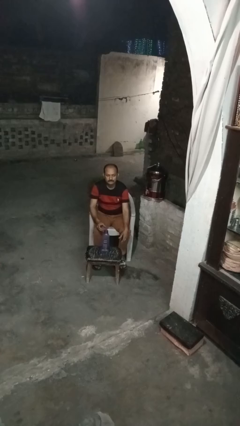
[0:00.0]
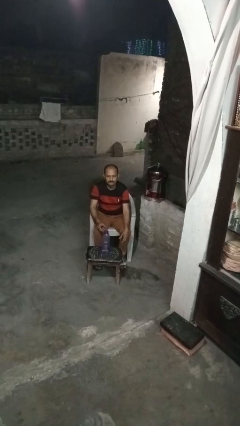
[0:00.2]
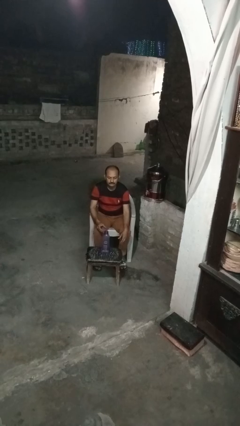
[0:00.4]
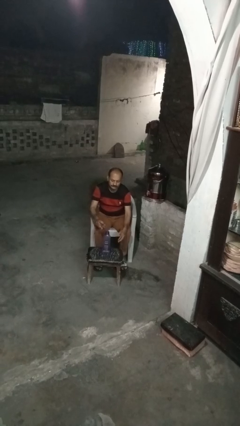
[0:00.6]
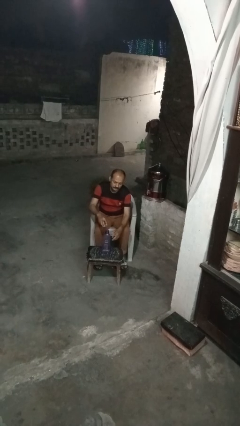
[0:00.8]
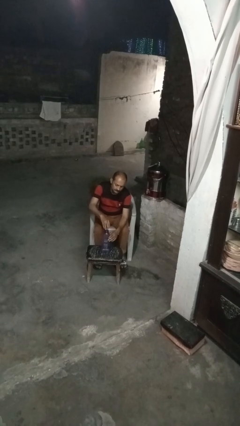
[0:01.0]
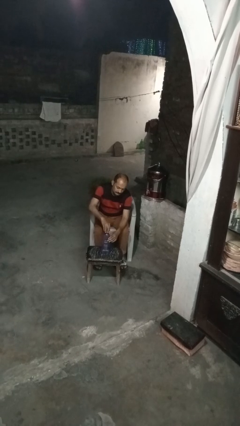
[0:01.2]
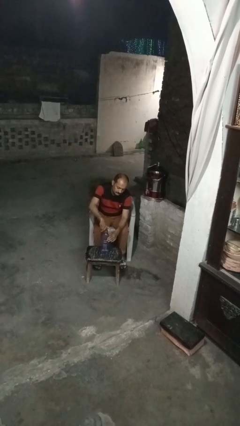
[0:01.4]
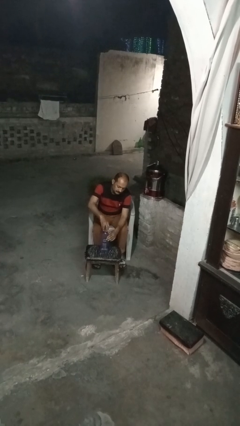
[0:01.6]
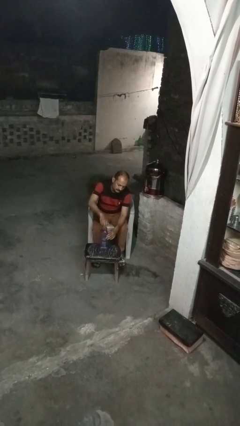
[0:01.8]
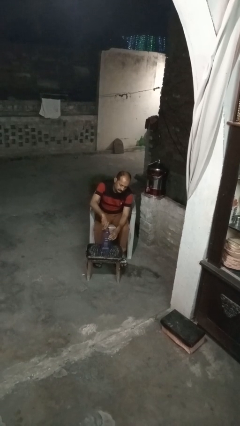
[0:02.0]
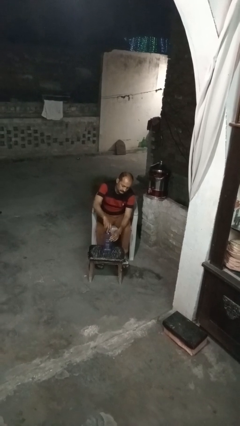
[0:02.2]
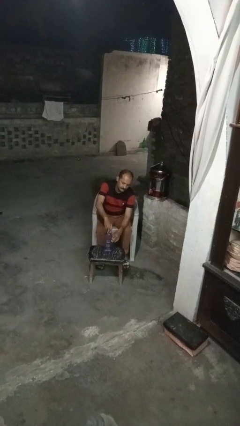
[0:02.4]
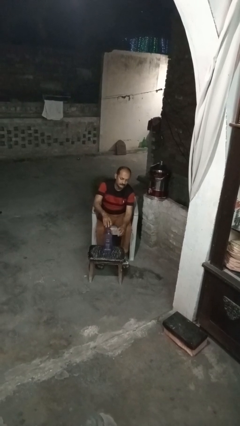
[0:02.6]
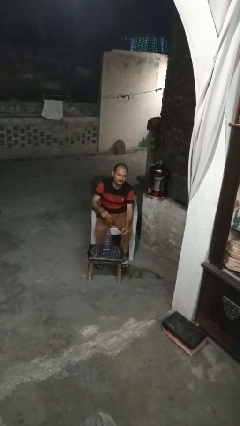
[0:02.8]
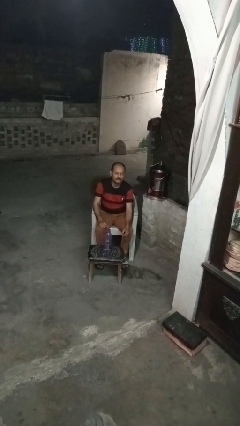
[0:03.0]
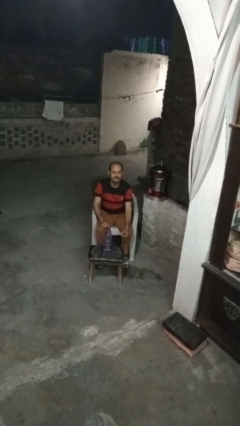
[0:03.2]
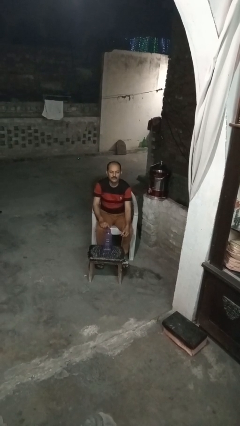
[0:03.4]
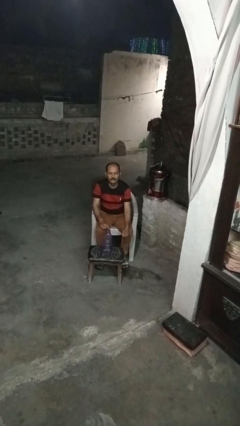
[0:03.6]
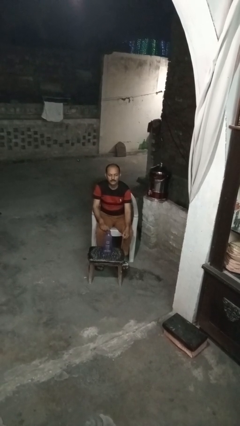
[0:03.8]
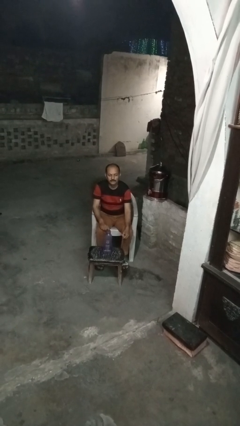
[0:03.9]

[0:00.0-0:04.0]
person screws lid to bottle

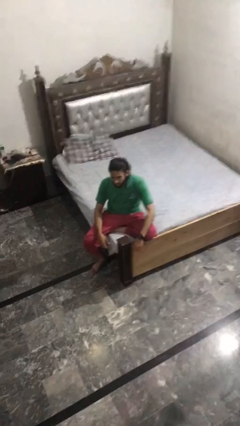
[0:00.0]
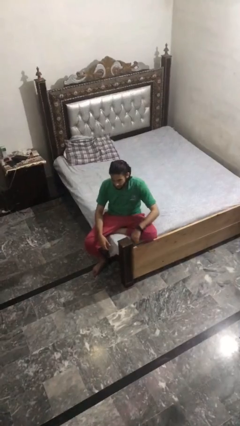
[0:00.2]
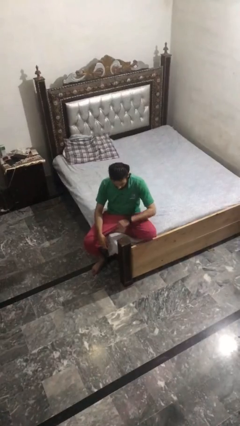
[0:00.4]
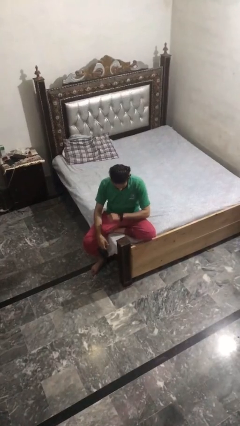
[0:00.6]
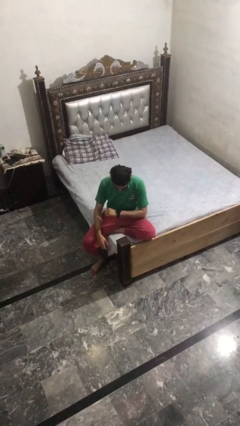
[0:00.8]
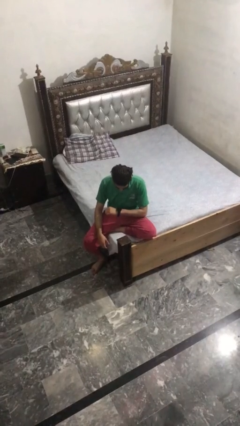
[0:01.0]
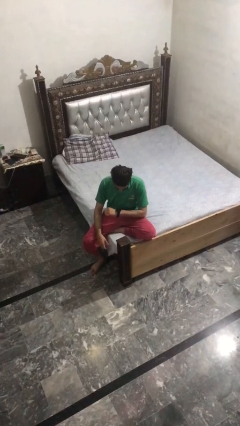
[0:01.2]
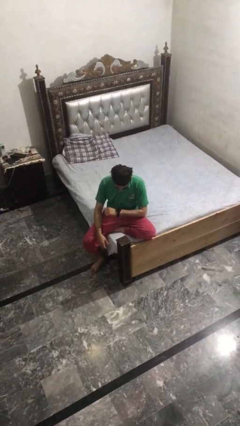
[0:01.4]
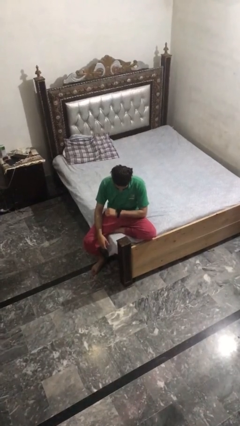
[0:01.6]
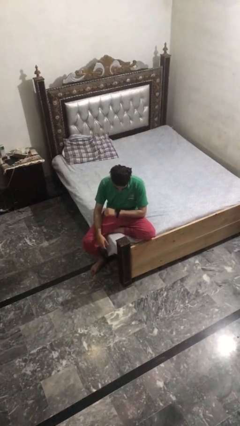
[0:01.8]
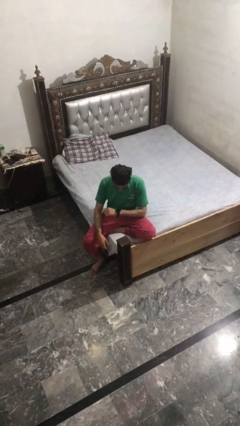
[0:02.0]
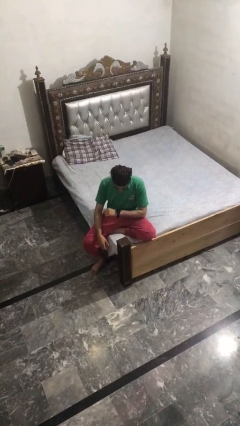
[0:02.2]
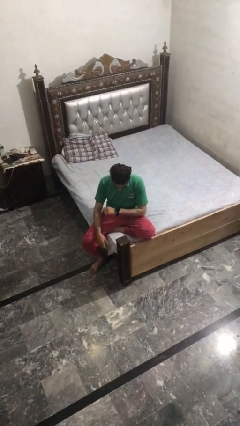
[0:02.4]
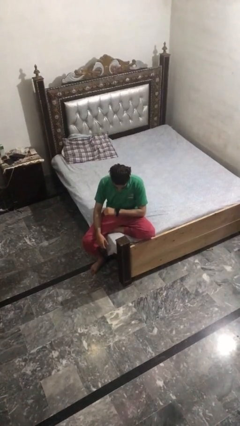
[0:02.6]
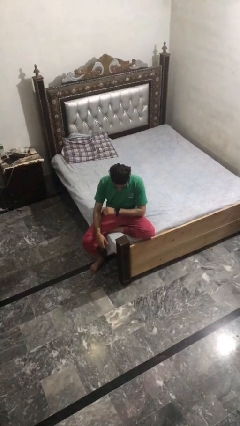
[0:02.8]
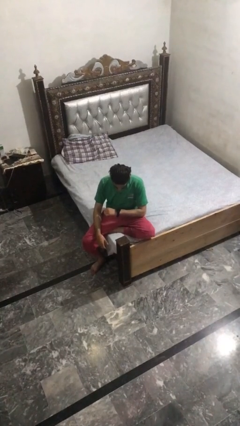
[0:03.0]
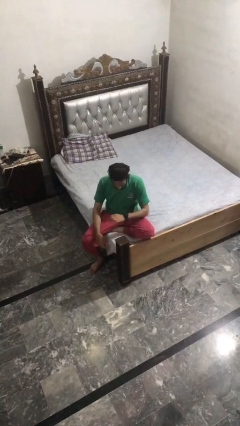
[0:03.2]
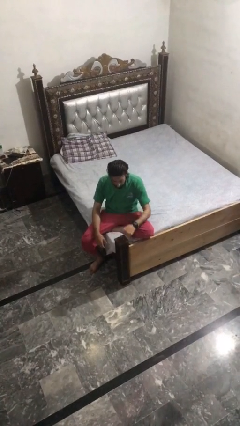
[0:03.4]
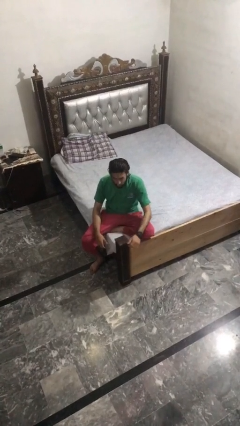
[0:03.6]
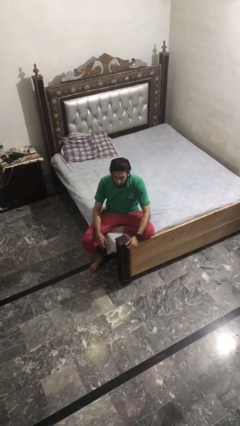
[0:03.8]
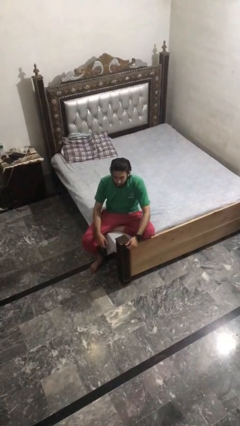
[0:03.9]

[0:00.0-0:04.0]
person looks at wristwatch

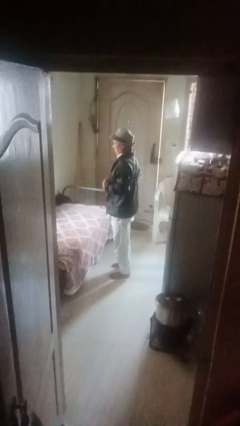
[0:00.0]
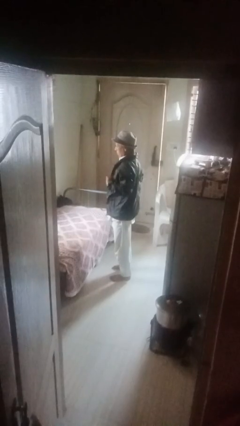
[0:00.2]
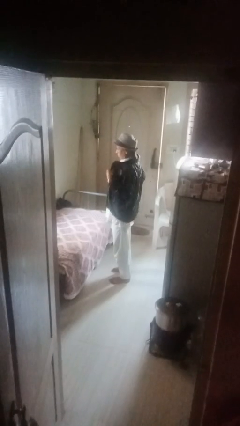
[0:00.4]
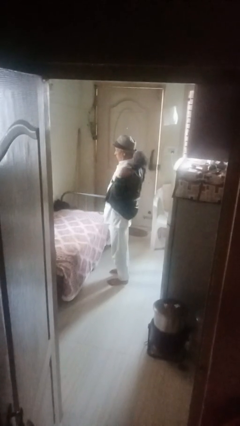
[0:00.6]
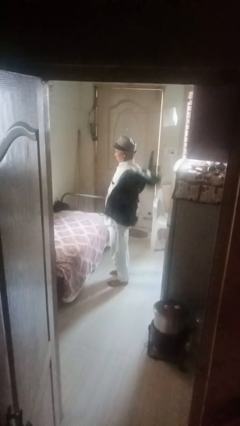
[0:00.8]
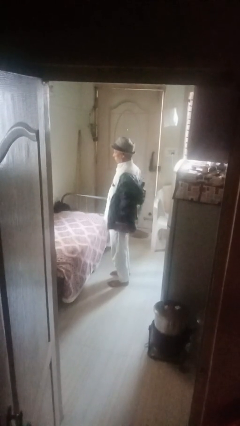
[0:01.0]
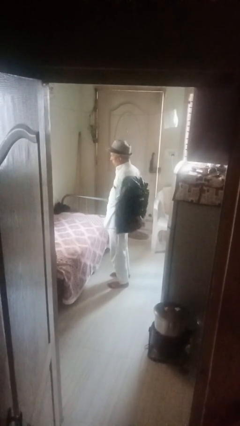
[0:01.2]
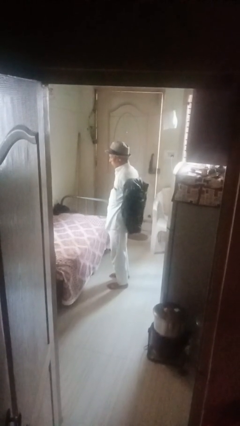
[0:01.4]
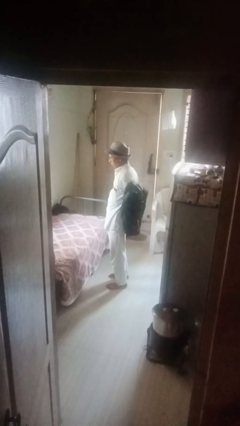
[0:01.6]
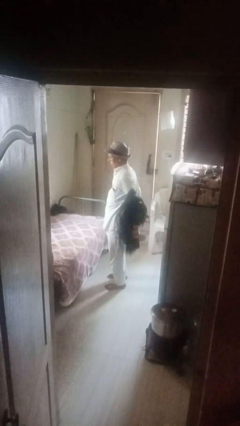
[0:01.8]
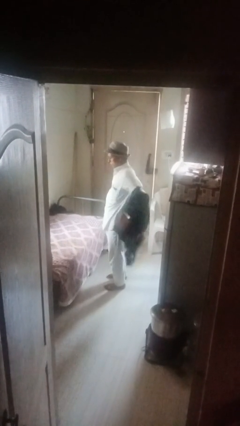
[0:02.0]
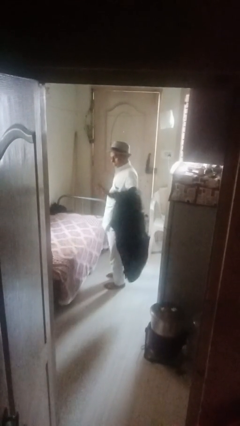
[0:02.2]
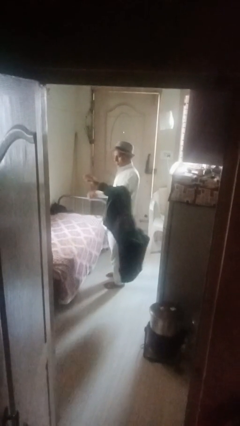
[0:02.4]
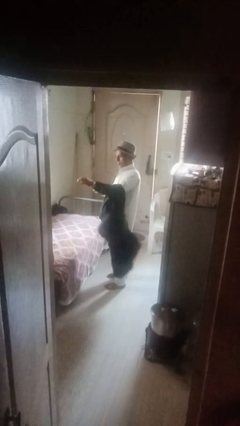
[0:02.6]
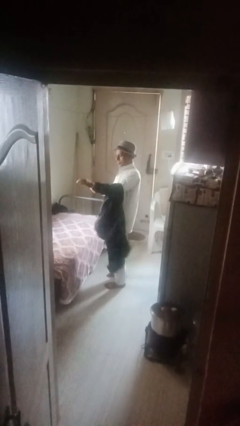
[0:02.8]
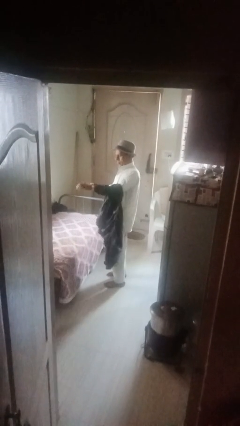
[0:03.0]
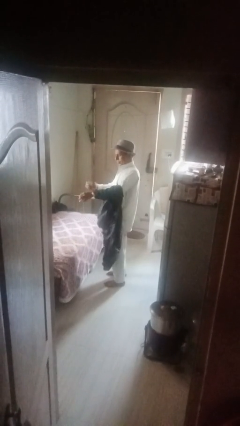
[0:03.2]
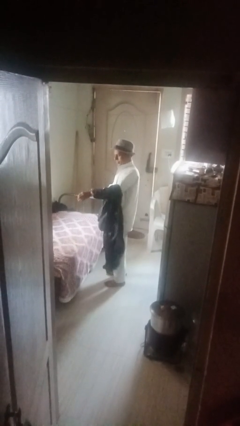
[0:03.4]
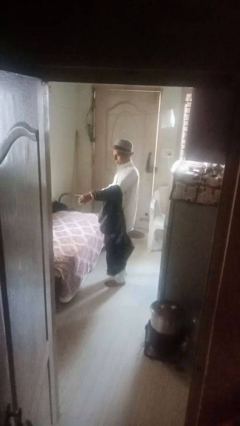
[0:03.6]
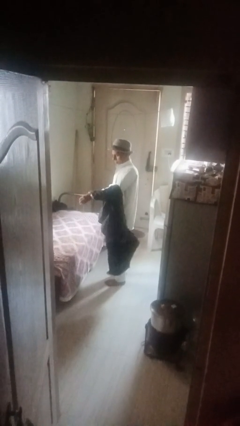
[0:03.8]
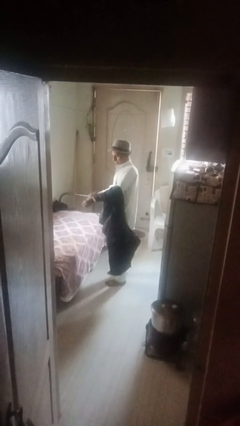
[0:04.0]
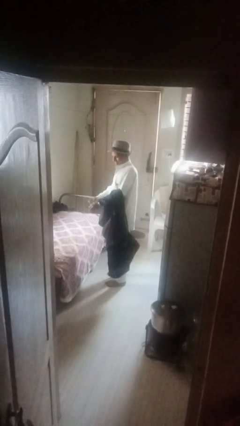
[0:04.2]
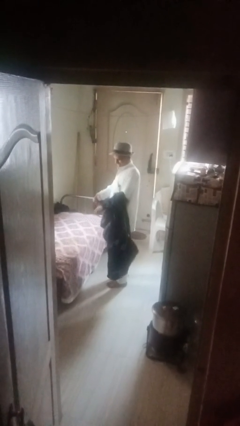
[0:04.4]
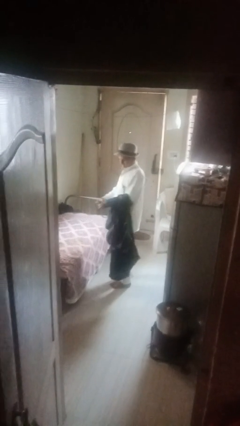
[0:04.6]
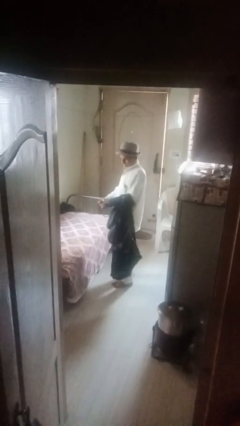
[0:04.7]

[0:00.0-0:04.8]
person takes off jacket

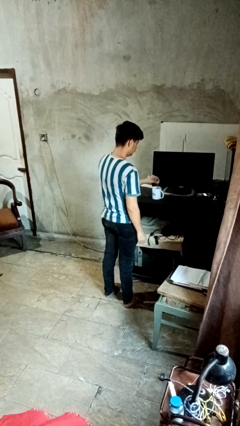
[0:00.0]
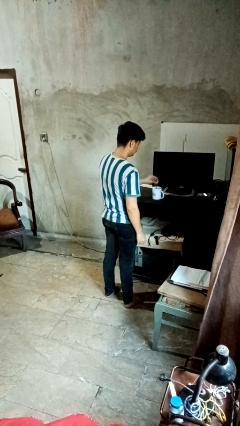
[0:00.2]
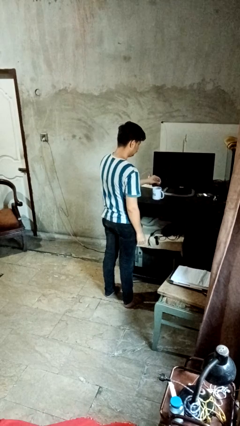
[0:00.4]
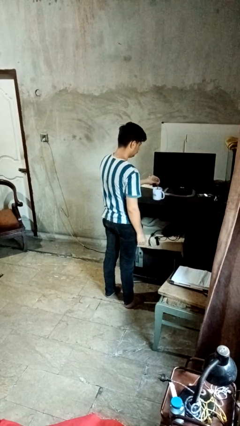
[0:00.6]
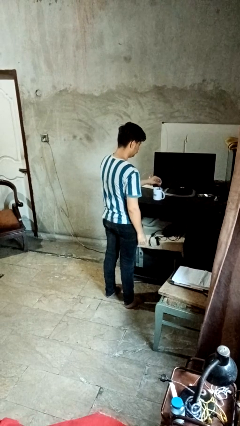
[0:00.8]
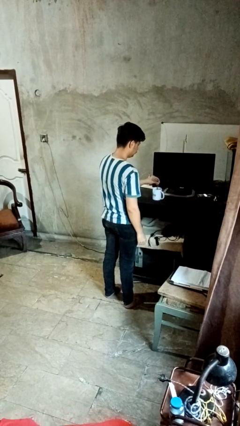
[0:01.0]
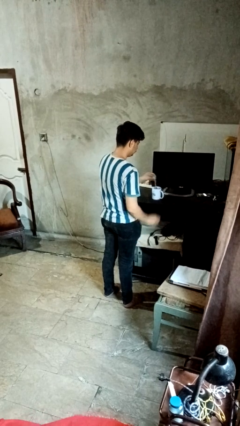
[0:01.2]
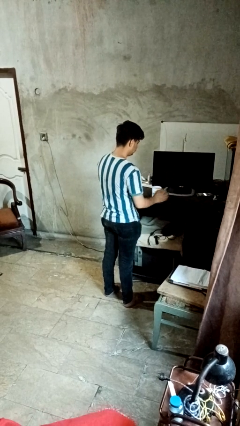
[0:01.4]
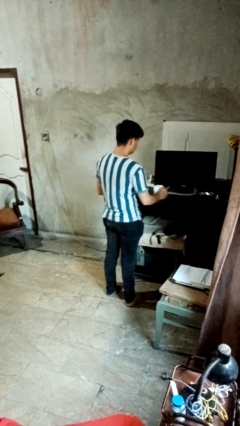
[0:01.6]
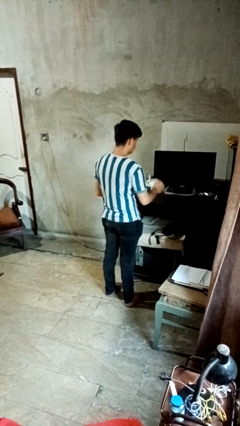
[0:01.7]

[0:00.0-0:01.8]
person stirs mug

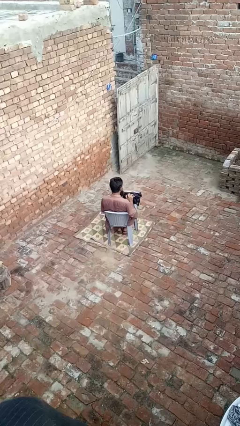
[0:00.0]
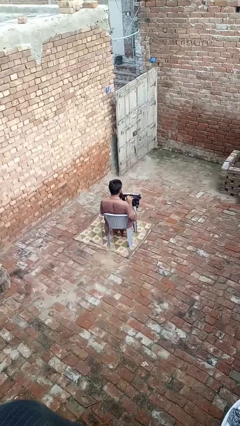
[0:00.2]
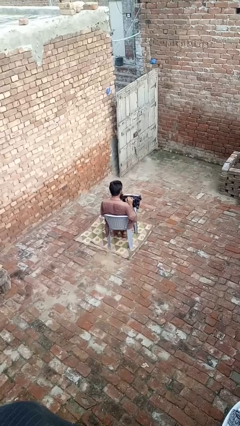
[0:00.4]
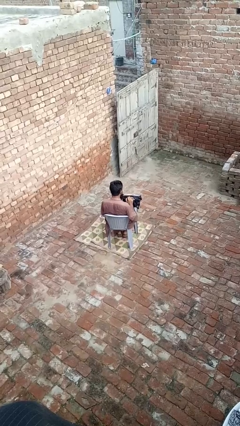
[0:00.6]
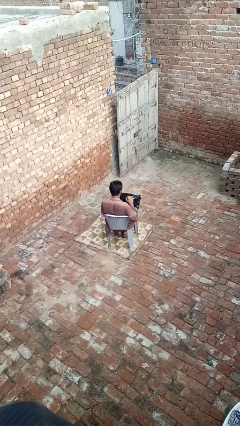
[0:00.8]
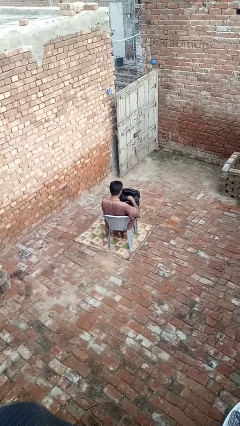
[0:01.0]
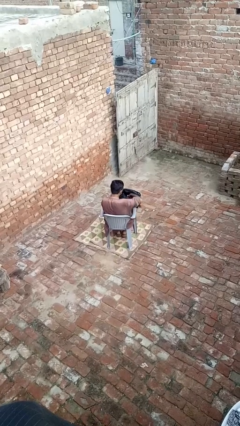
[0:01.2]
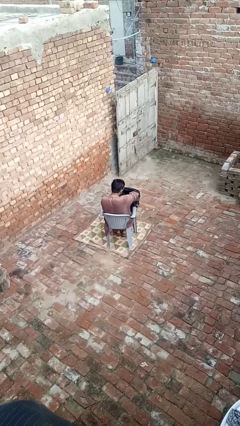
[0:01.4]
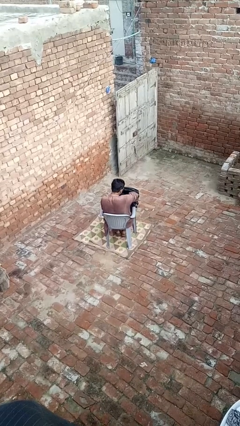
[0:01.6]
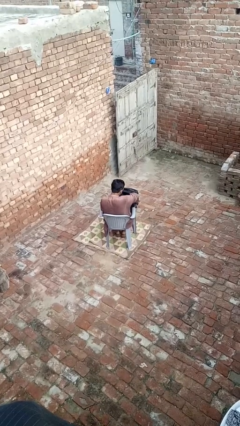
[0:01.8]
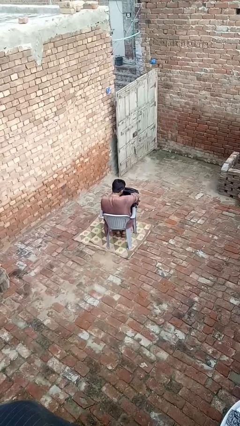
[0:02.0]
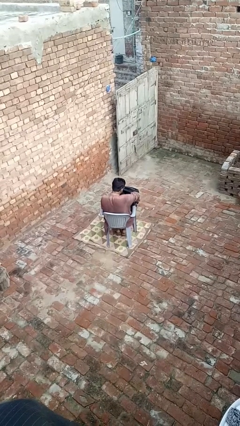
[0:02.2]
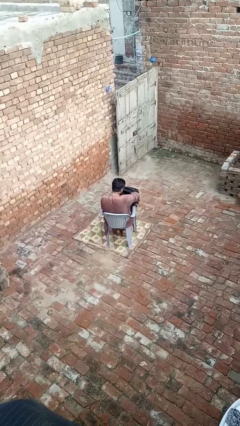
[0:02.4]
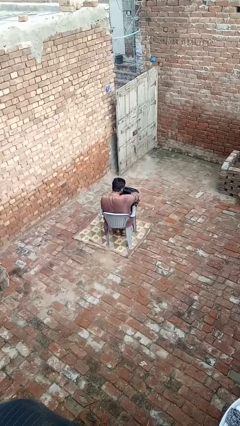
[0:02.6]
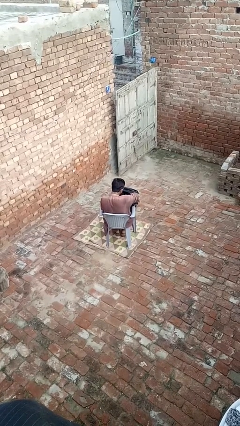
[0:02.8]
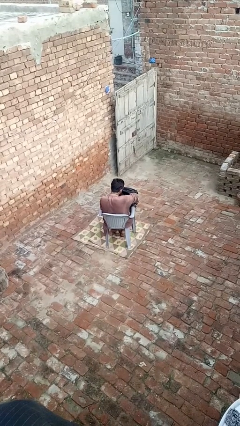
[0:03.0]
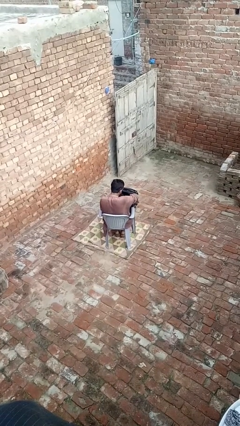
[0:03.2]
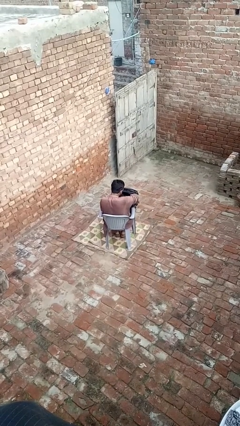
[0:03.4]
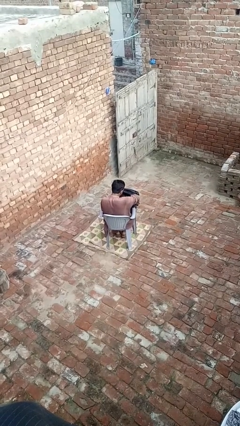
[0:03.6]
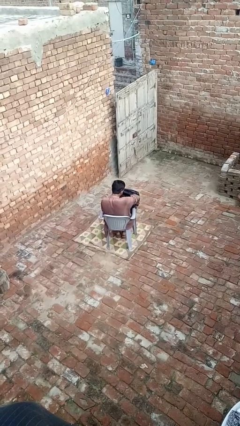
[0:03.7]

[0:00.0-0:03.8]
person searches in backpack
